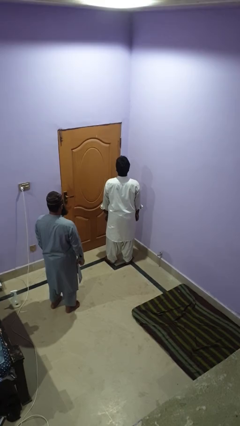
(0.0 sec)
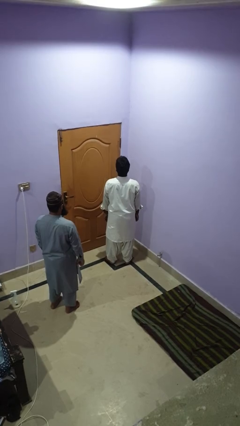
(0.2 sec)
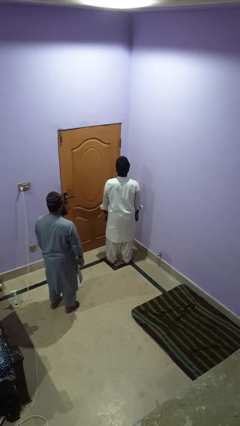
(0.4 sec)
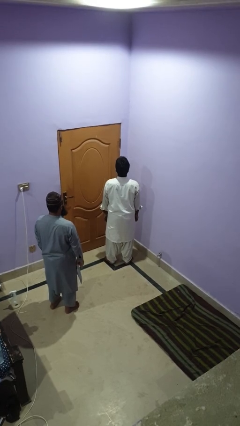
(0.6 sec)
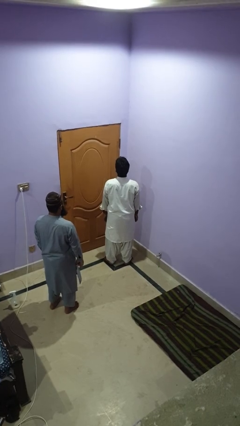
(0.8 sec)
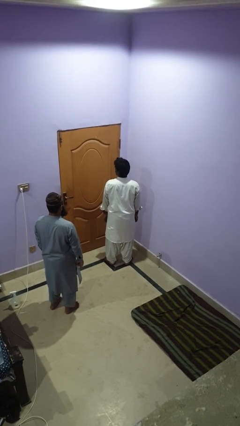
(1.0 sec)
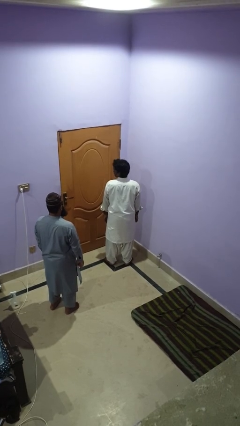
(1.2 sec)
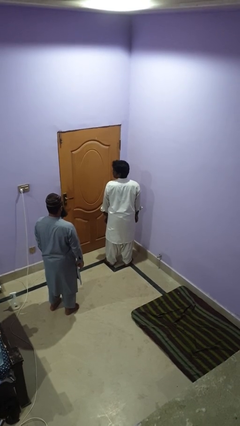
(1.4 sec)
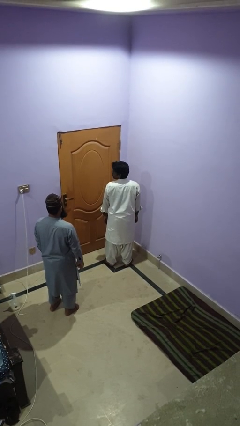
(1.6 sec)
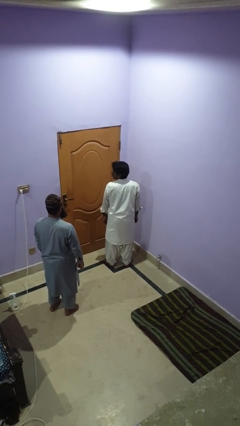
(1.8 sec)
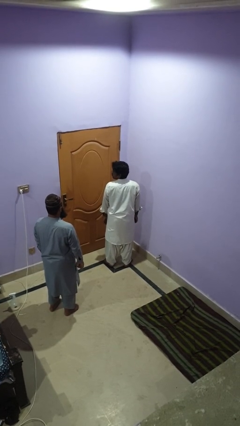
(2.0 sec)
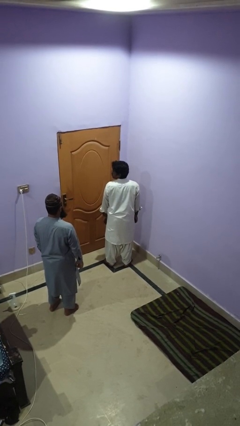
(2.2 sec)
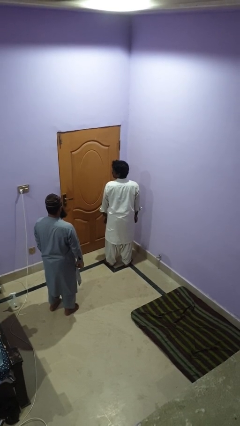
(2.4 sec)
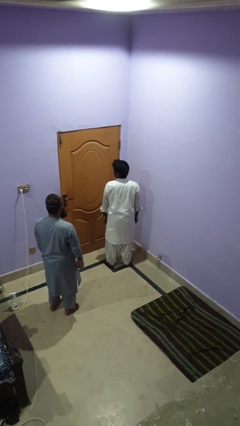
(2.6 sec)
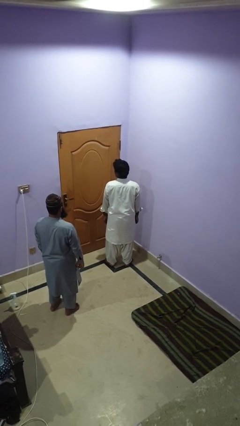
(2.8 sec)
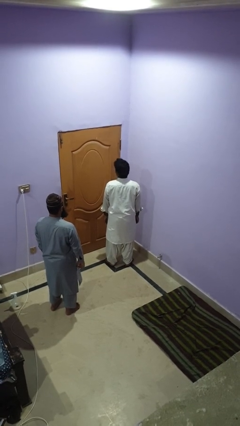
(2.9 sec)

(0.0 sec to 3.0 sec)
person looks over shoulder

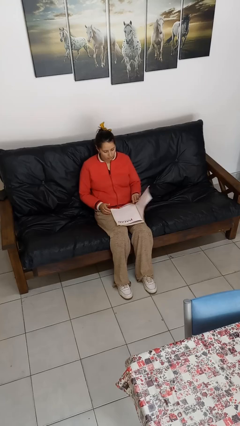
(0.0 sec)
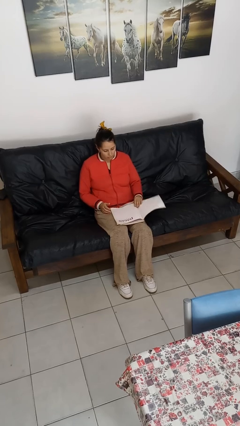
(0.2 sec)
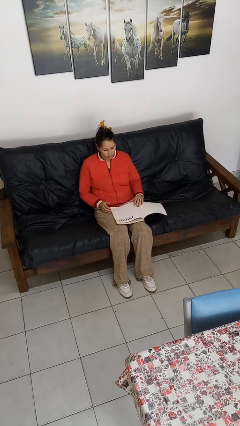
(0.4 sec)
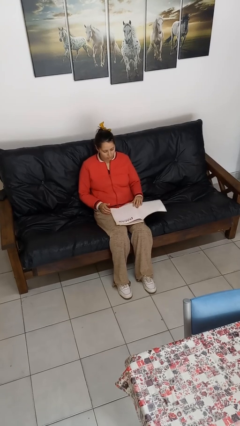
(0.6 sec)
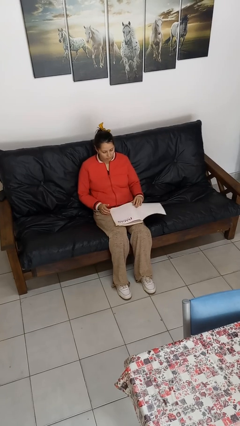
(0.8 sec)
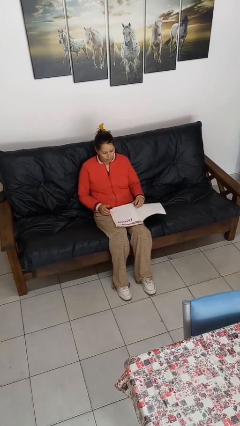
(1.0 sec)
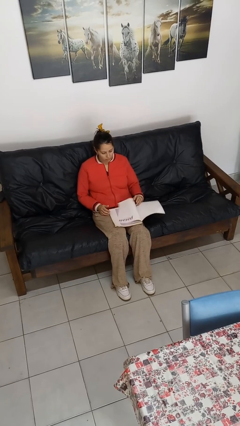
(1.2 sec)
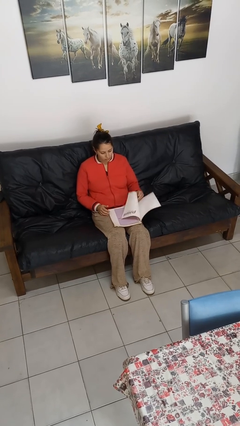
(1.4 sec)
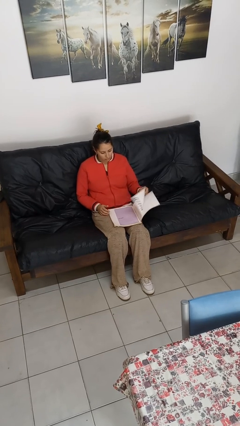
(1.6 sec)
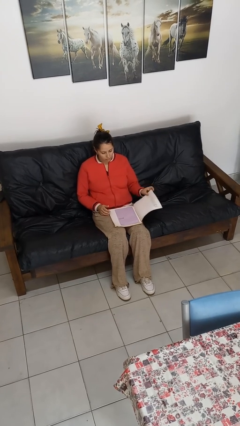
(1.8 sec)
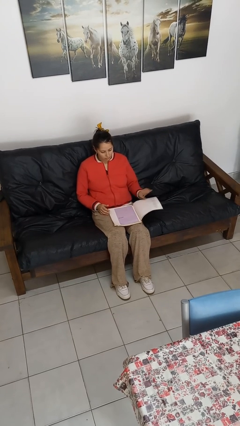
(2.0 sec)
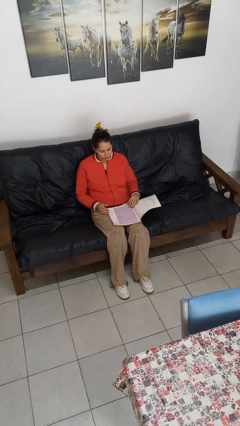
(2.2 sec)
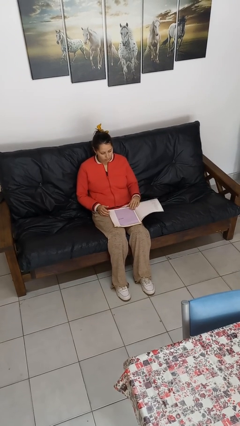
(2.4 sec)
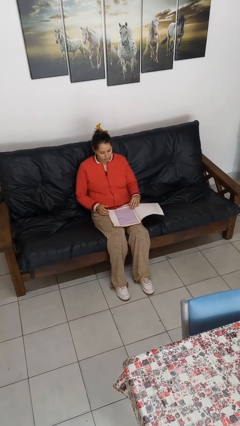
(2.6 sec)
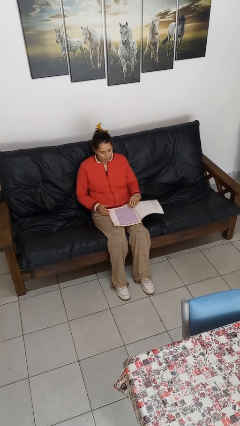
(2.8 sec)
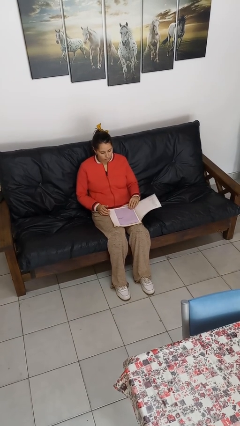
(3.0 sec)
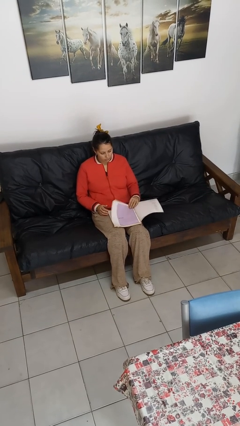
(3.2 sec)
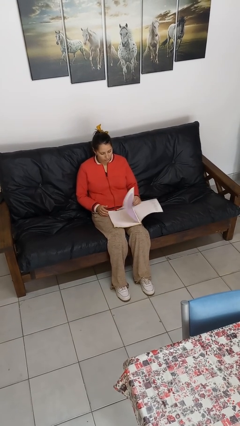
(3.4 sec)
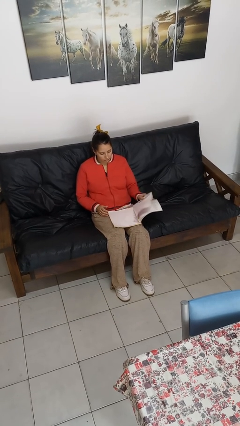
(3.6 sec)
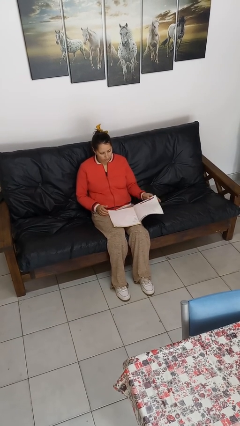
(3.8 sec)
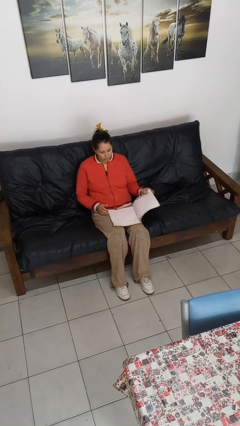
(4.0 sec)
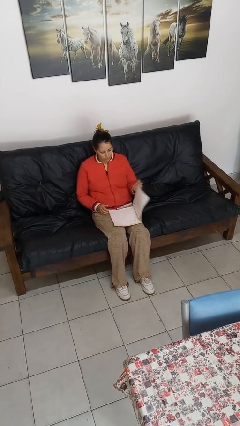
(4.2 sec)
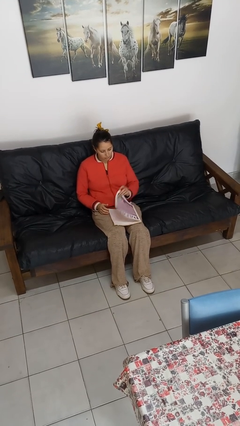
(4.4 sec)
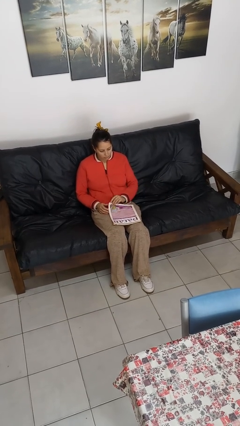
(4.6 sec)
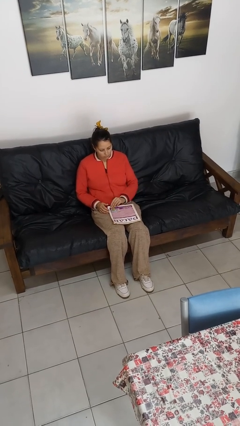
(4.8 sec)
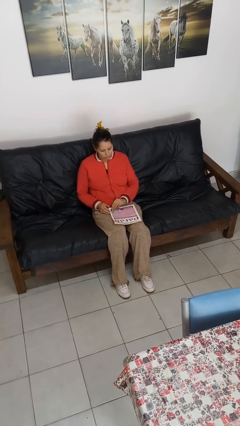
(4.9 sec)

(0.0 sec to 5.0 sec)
person reads magazine

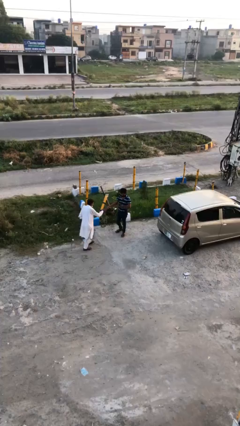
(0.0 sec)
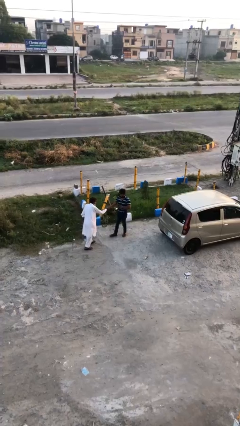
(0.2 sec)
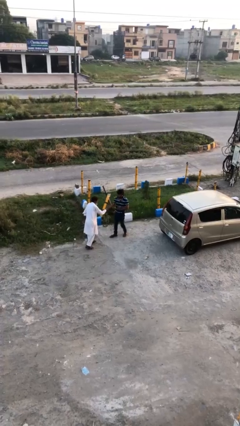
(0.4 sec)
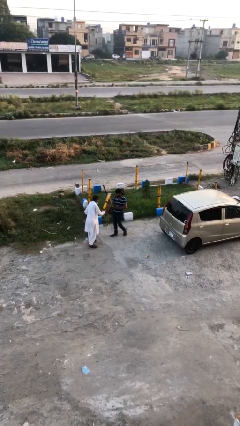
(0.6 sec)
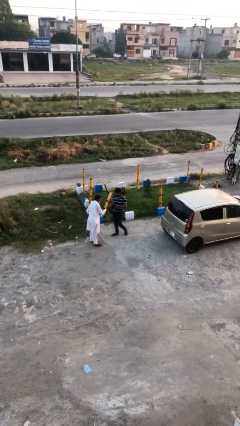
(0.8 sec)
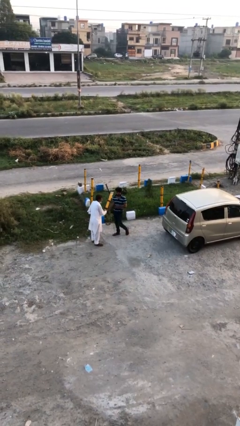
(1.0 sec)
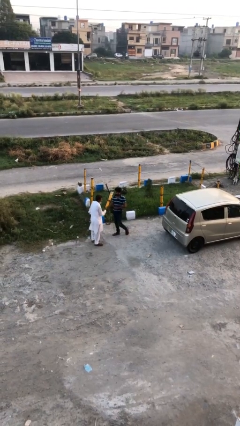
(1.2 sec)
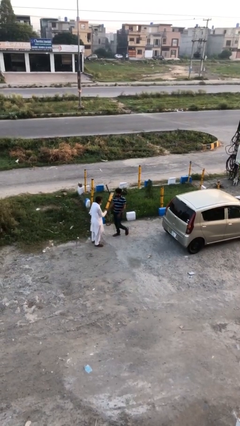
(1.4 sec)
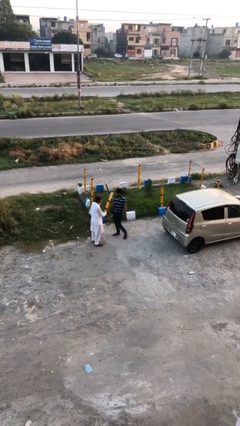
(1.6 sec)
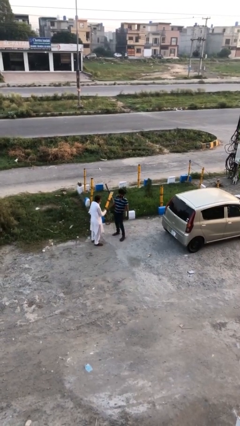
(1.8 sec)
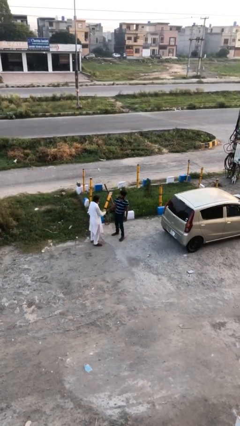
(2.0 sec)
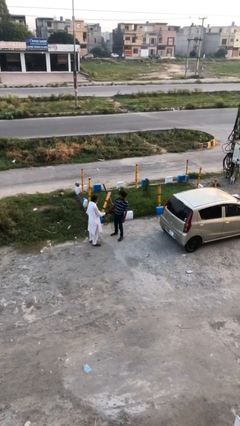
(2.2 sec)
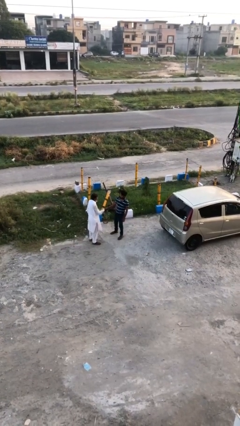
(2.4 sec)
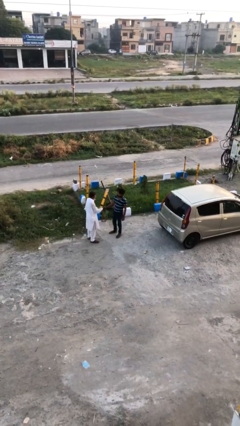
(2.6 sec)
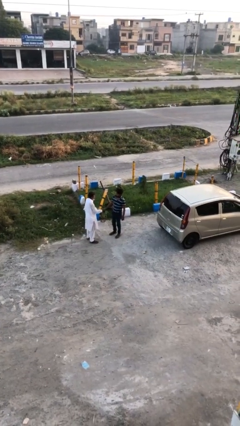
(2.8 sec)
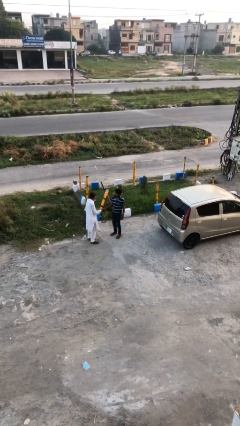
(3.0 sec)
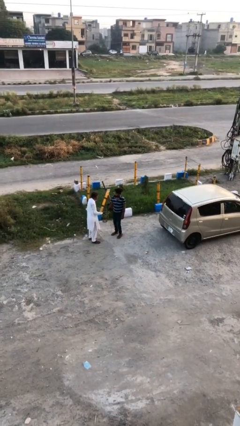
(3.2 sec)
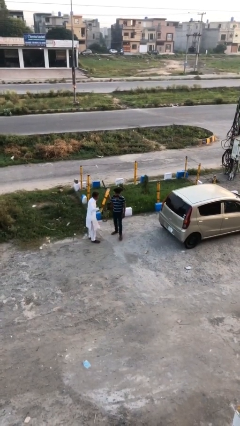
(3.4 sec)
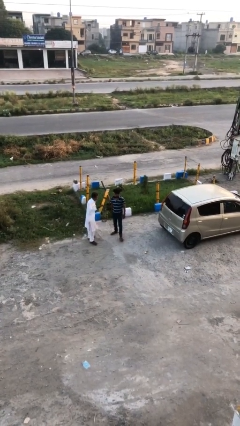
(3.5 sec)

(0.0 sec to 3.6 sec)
person shakes hand

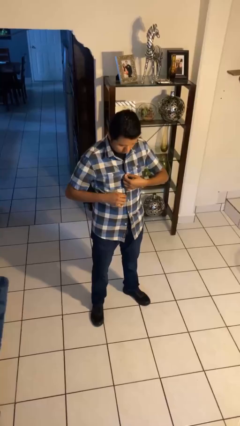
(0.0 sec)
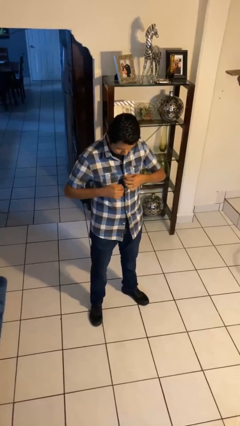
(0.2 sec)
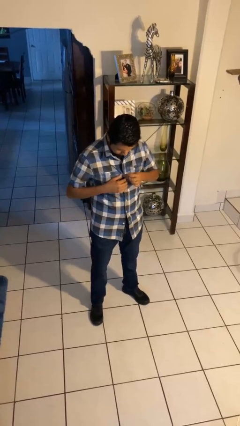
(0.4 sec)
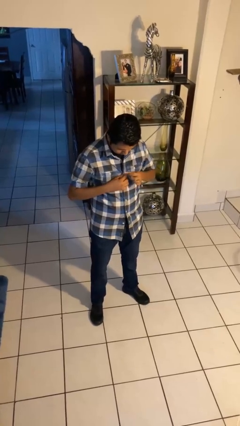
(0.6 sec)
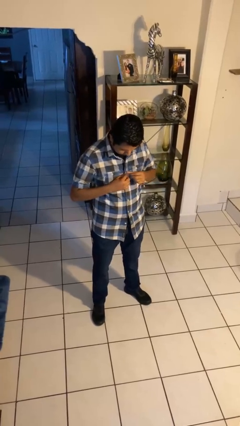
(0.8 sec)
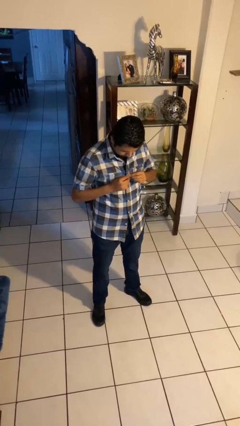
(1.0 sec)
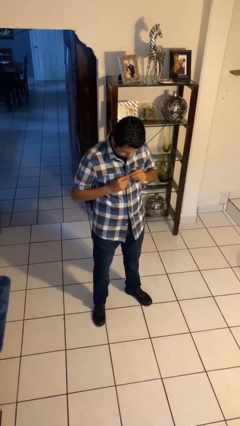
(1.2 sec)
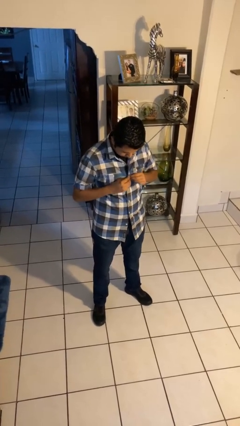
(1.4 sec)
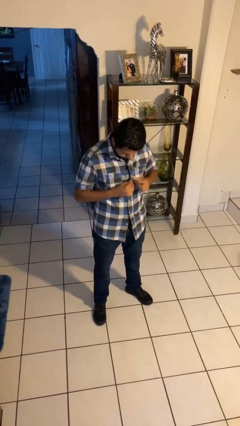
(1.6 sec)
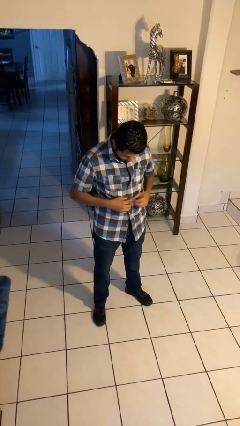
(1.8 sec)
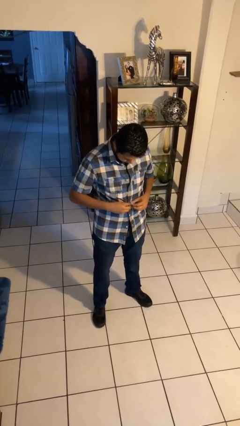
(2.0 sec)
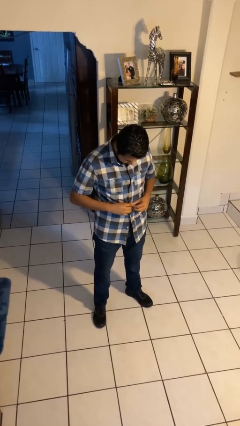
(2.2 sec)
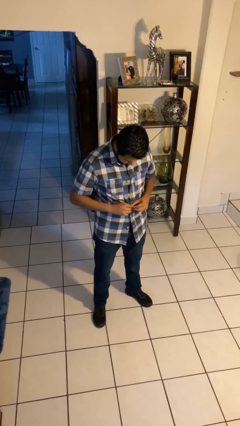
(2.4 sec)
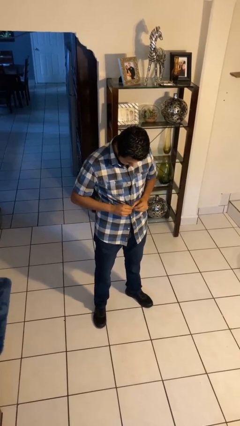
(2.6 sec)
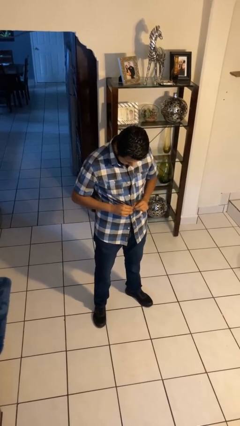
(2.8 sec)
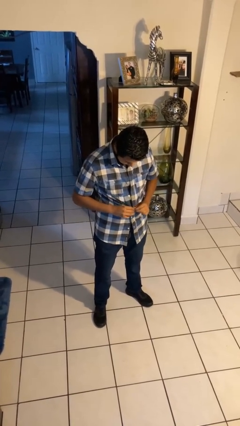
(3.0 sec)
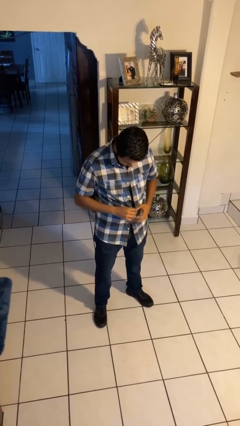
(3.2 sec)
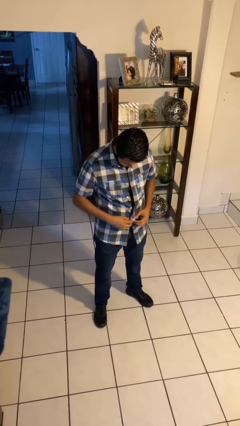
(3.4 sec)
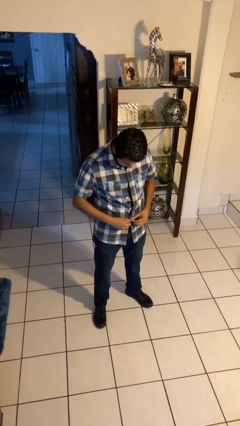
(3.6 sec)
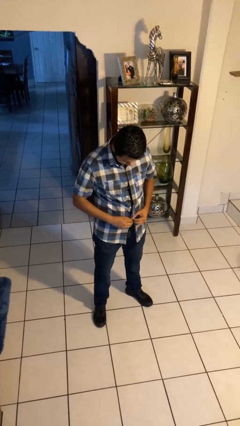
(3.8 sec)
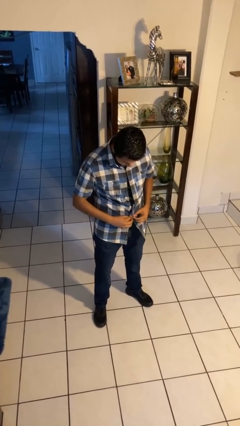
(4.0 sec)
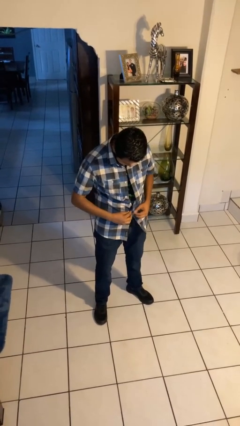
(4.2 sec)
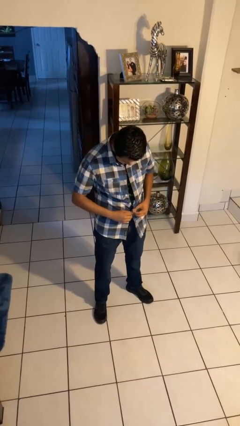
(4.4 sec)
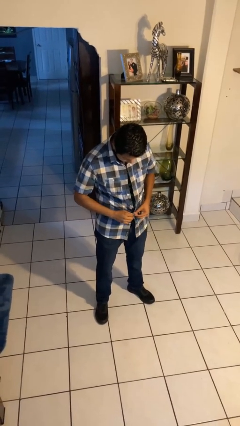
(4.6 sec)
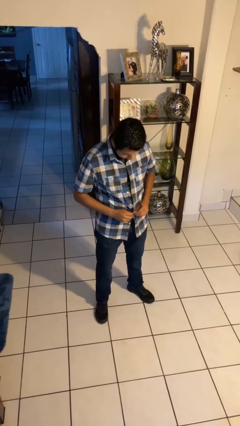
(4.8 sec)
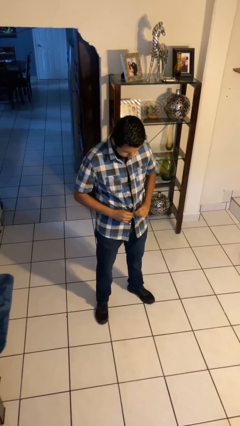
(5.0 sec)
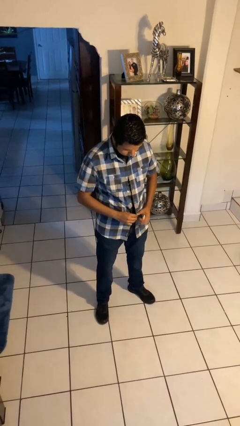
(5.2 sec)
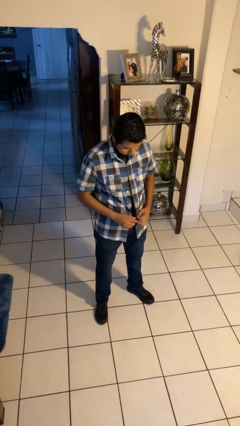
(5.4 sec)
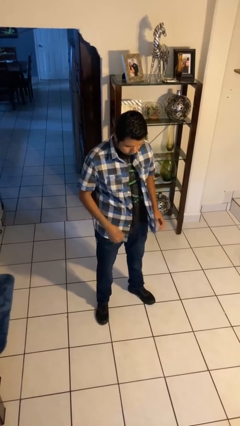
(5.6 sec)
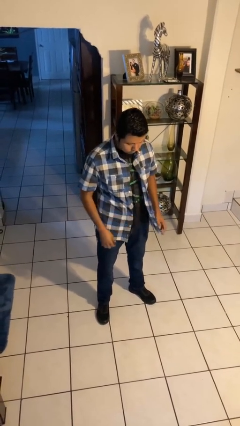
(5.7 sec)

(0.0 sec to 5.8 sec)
person unbuttons shirt

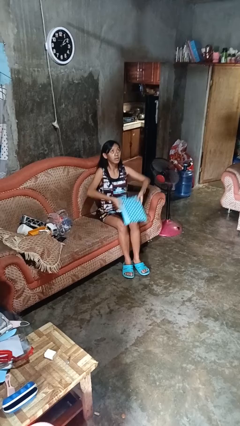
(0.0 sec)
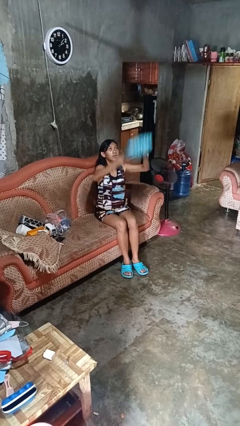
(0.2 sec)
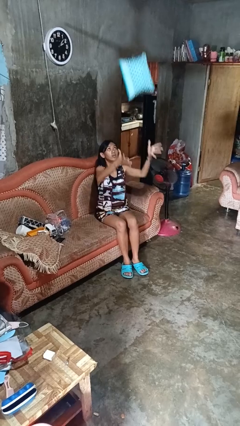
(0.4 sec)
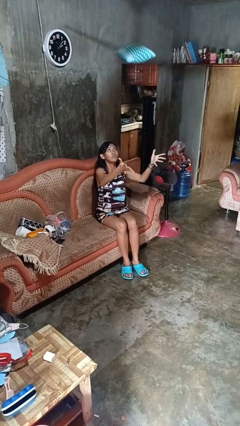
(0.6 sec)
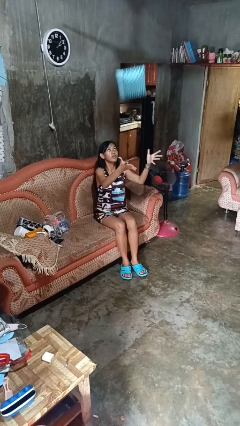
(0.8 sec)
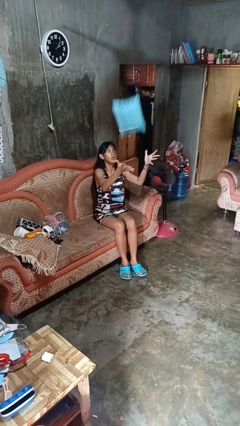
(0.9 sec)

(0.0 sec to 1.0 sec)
person drops object
